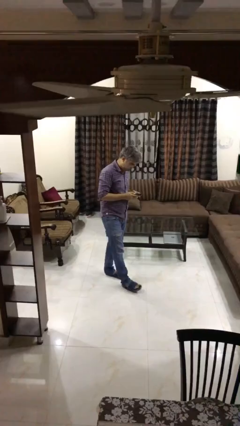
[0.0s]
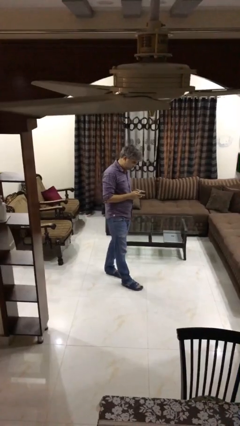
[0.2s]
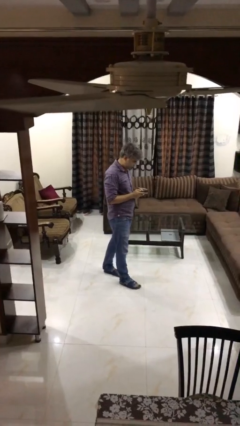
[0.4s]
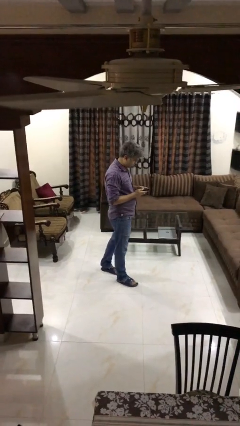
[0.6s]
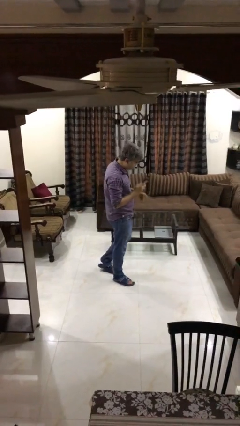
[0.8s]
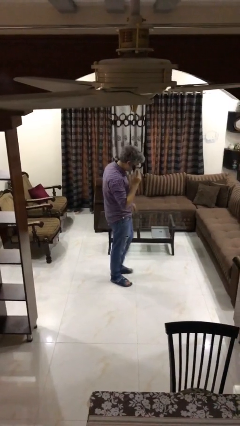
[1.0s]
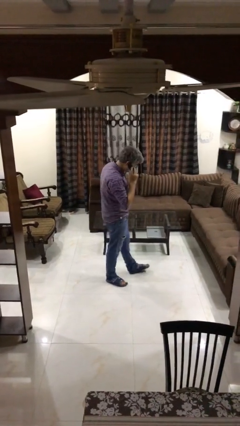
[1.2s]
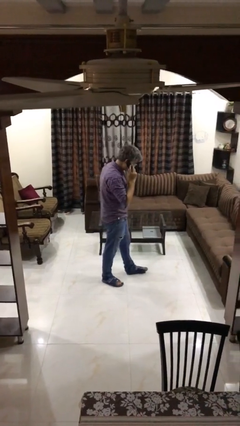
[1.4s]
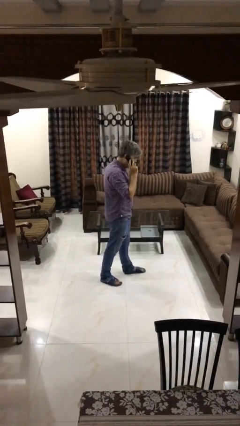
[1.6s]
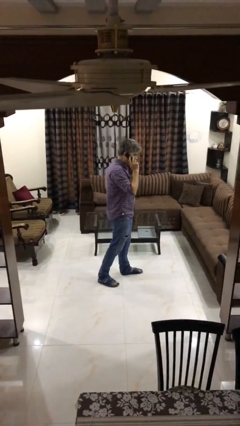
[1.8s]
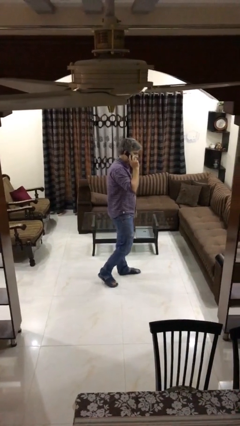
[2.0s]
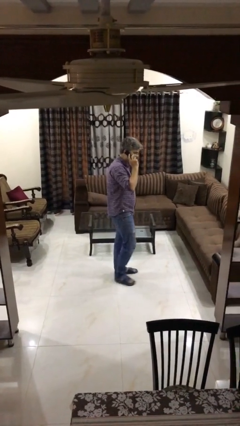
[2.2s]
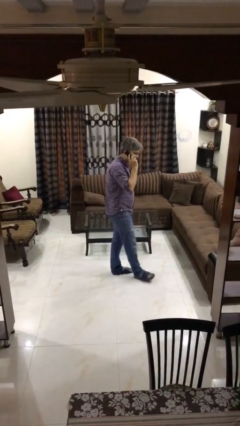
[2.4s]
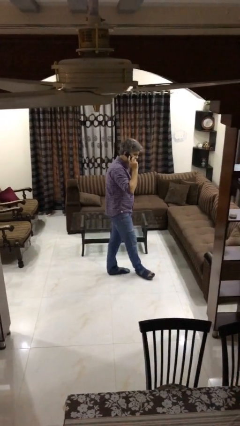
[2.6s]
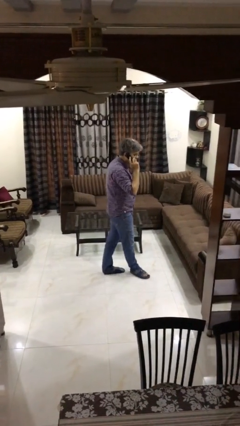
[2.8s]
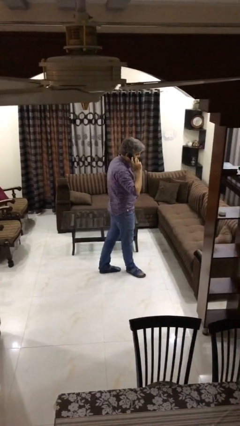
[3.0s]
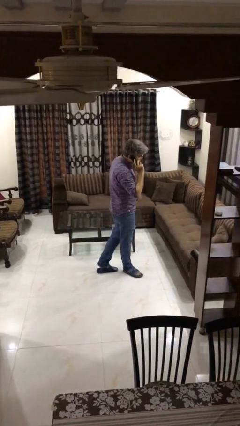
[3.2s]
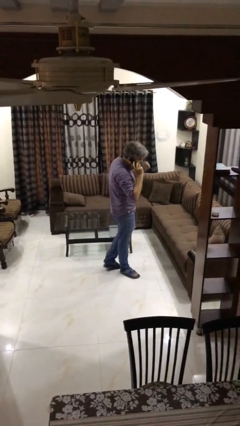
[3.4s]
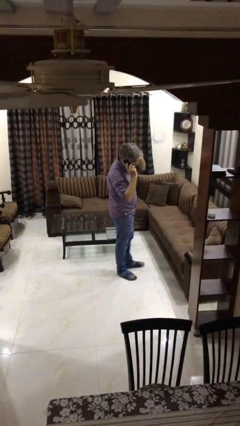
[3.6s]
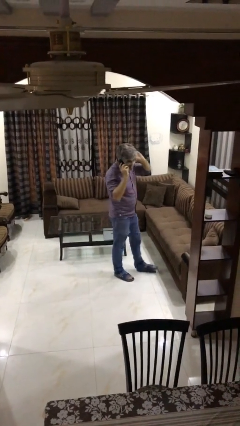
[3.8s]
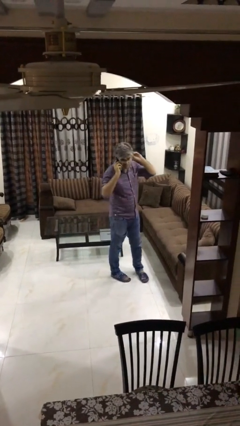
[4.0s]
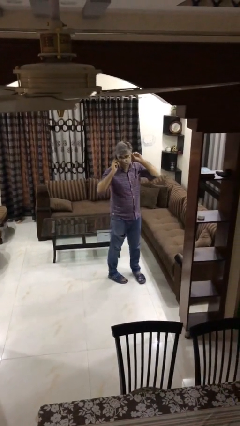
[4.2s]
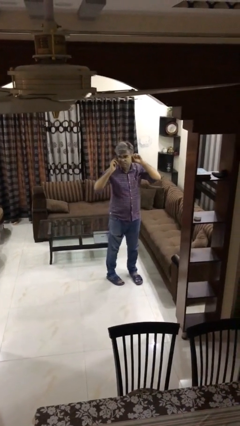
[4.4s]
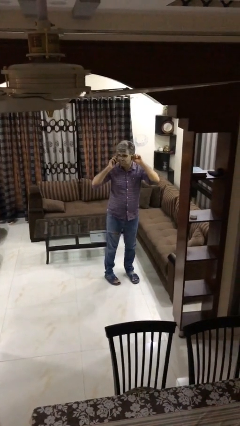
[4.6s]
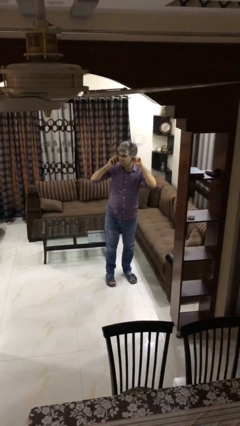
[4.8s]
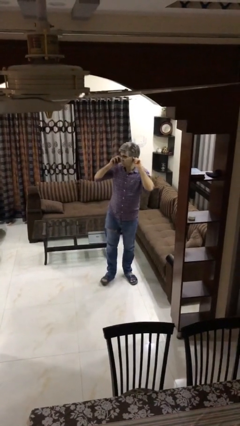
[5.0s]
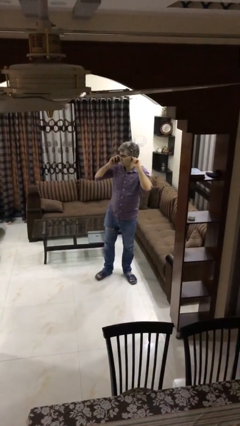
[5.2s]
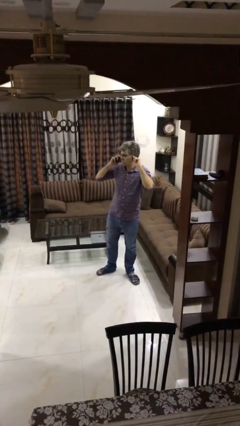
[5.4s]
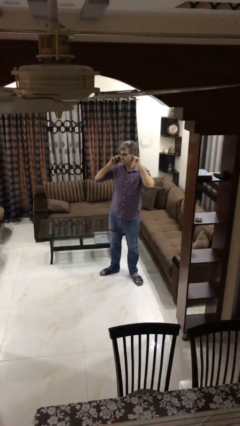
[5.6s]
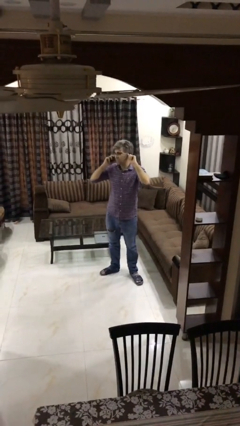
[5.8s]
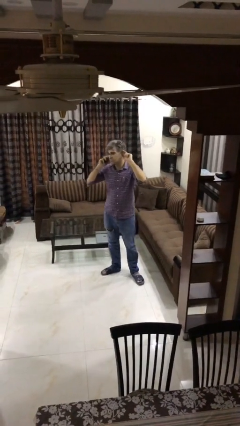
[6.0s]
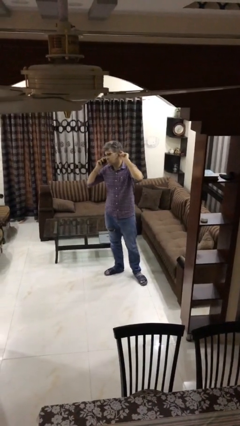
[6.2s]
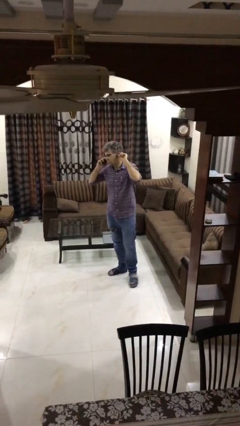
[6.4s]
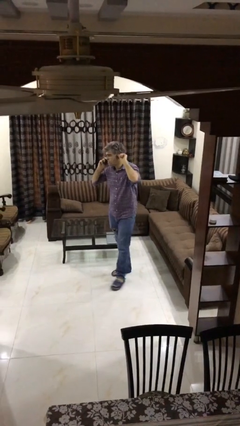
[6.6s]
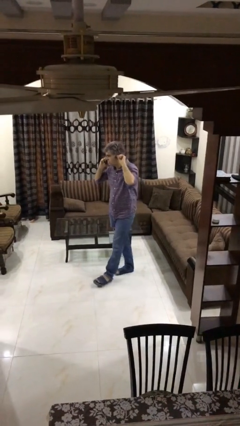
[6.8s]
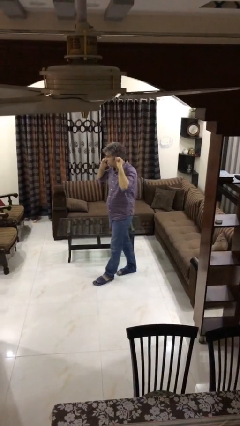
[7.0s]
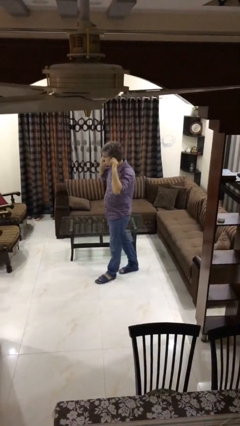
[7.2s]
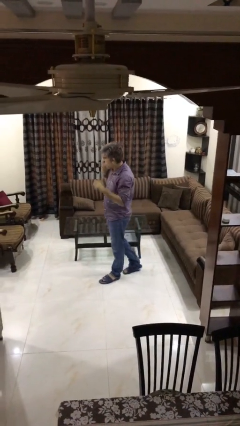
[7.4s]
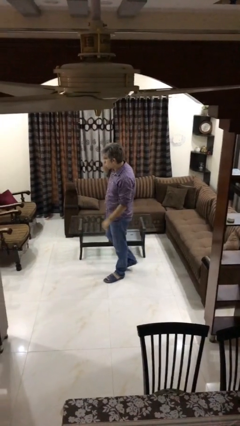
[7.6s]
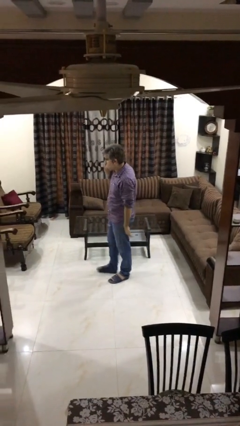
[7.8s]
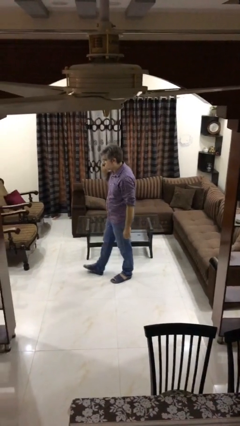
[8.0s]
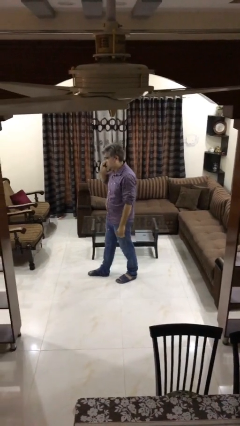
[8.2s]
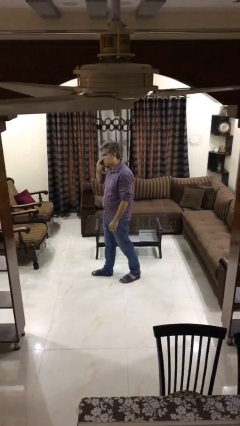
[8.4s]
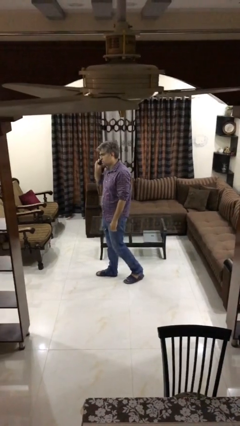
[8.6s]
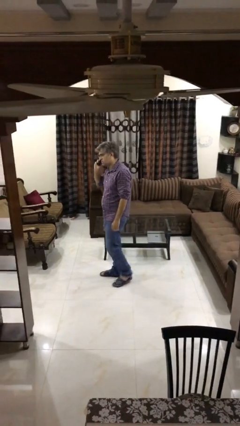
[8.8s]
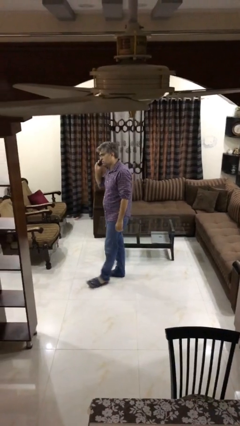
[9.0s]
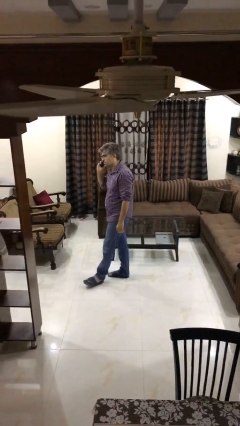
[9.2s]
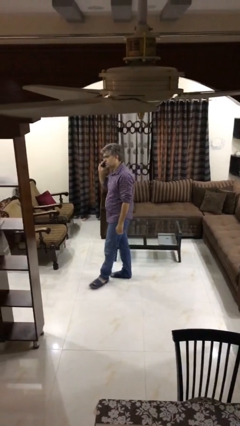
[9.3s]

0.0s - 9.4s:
person talks on phone

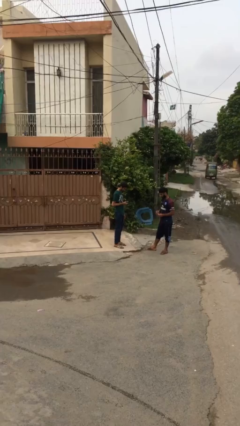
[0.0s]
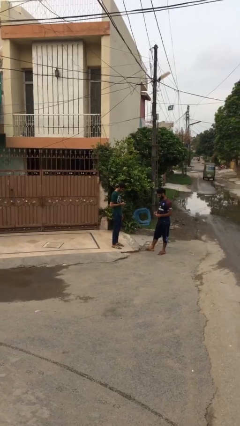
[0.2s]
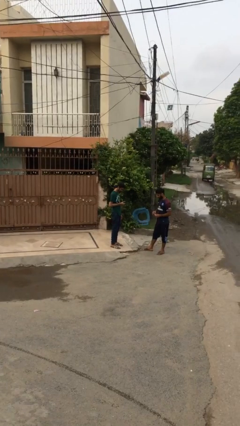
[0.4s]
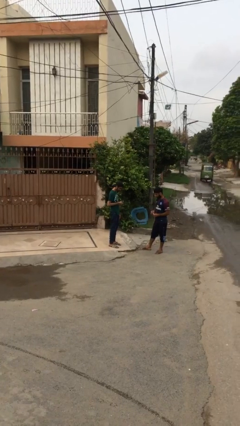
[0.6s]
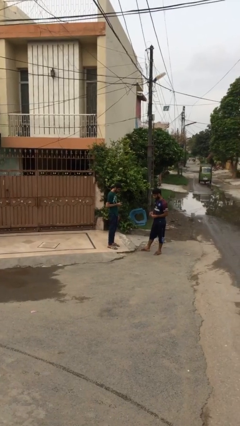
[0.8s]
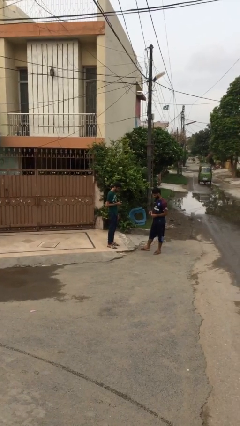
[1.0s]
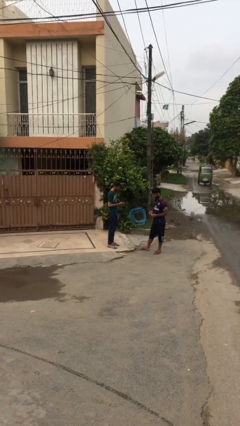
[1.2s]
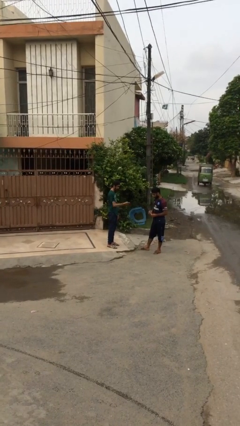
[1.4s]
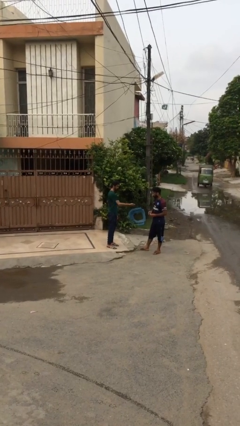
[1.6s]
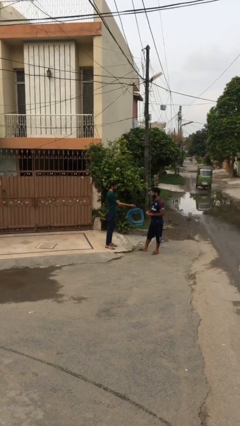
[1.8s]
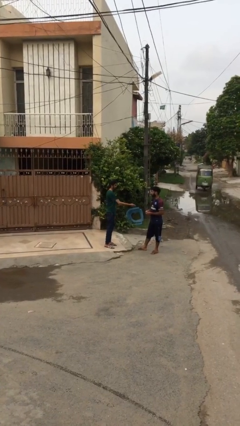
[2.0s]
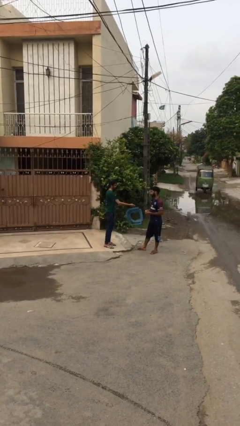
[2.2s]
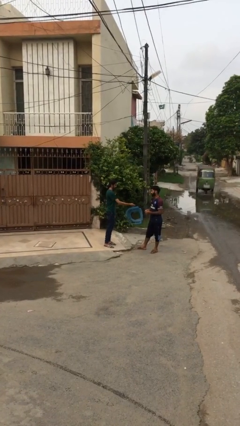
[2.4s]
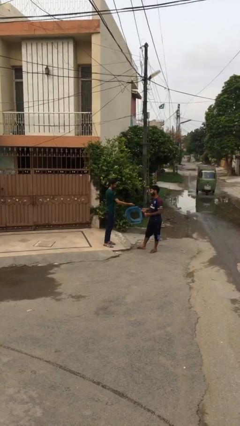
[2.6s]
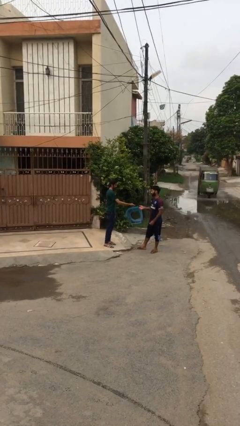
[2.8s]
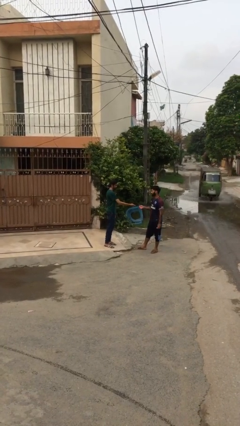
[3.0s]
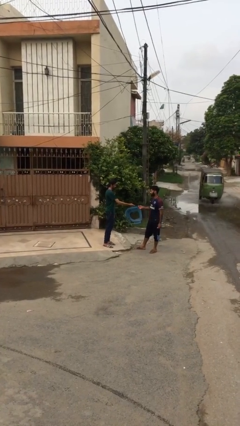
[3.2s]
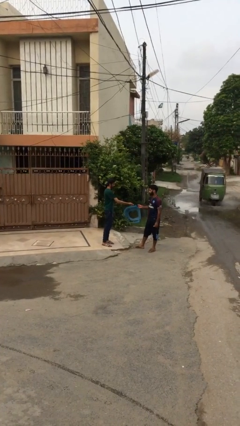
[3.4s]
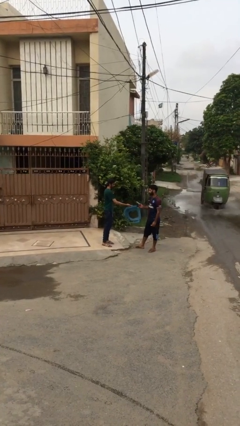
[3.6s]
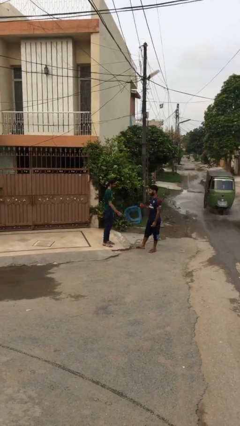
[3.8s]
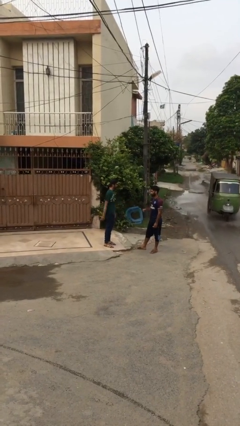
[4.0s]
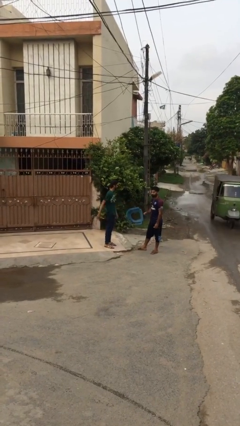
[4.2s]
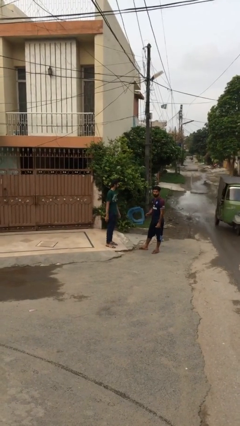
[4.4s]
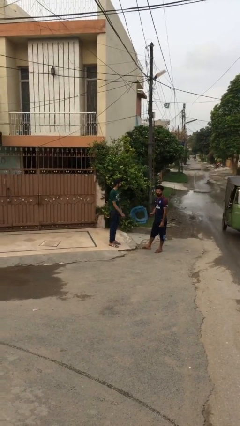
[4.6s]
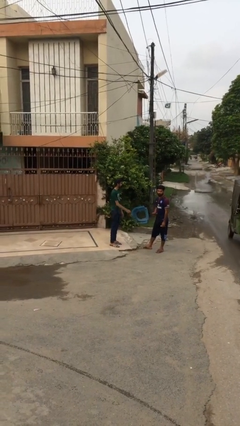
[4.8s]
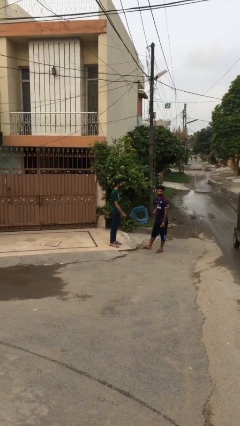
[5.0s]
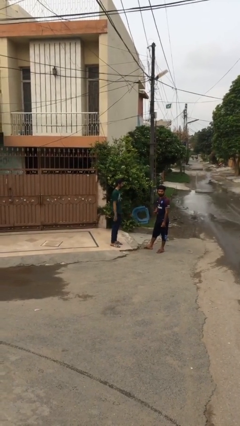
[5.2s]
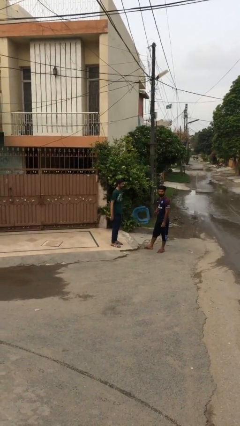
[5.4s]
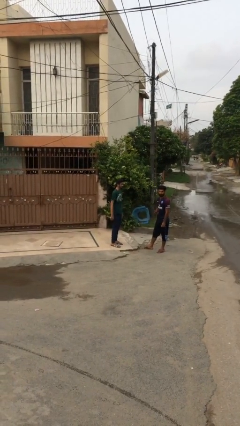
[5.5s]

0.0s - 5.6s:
person transfers object to person

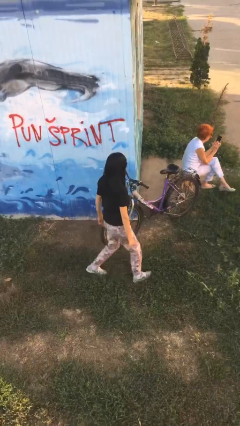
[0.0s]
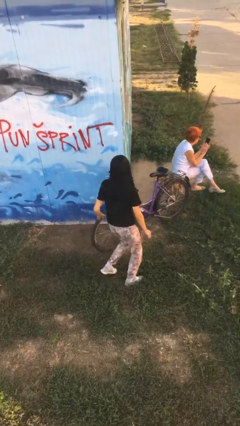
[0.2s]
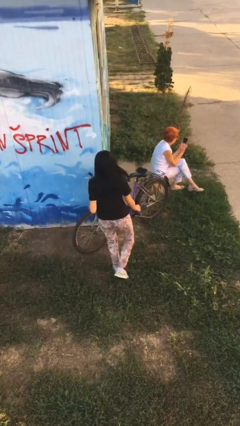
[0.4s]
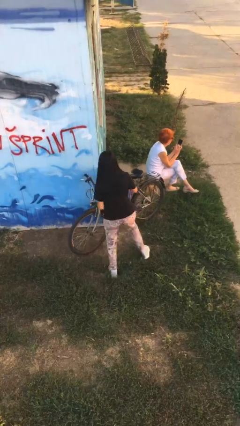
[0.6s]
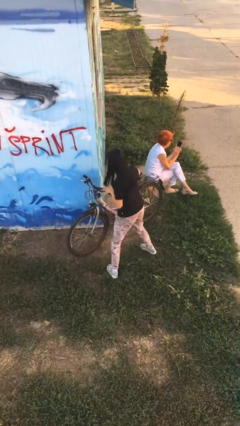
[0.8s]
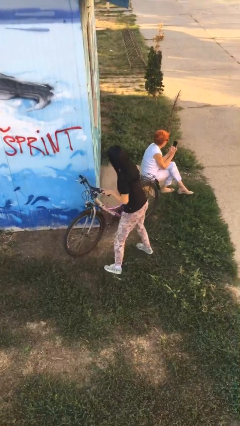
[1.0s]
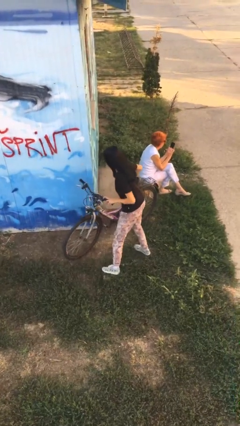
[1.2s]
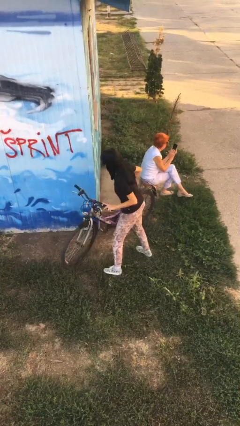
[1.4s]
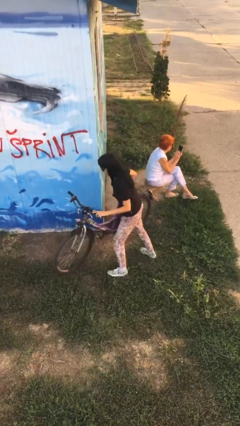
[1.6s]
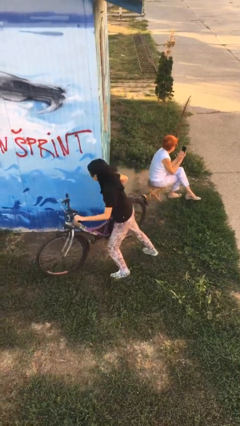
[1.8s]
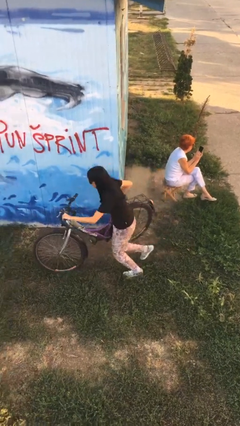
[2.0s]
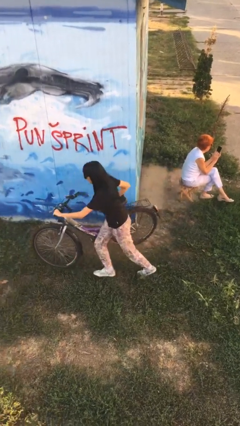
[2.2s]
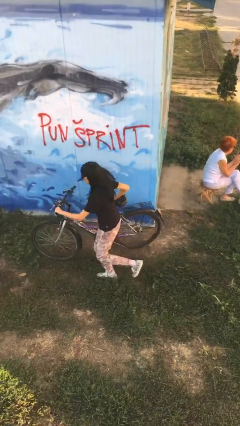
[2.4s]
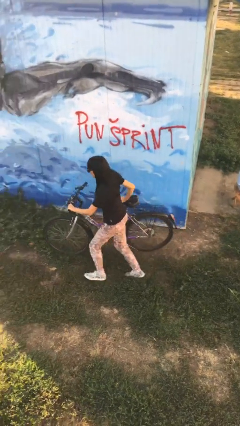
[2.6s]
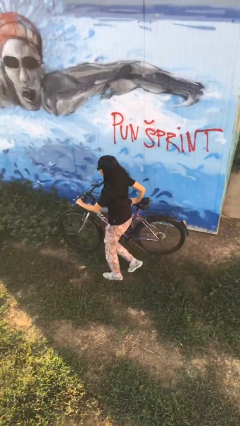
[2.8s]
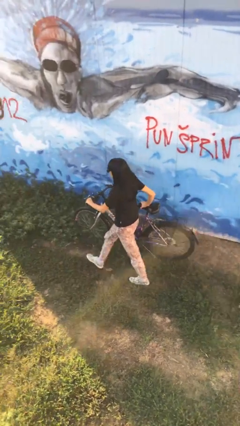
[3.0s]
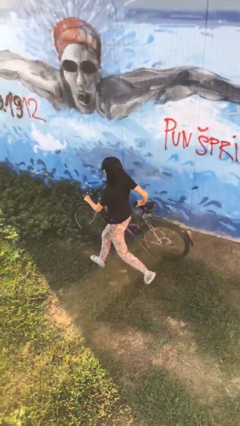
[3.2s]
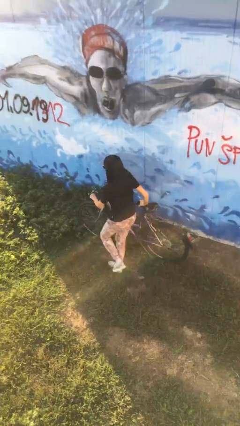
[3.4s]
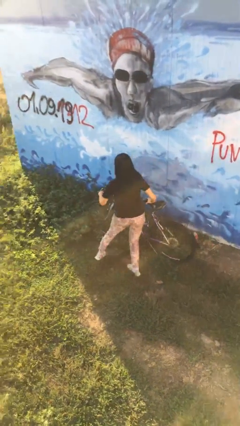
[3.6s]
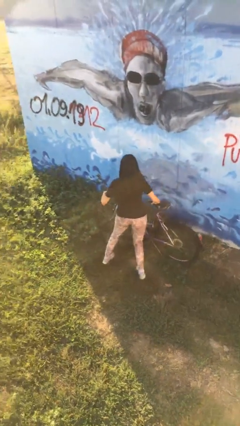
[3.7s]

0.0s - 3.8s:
person steals object from person
